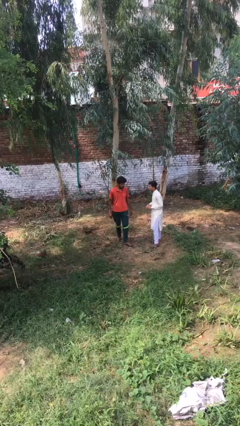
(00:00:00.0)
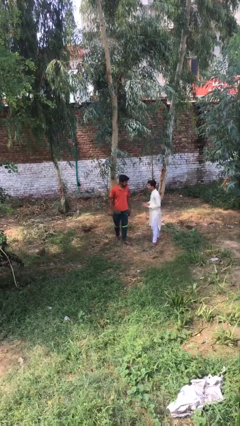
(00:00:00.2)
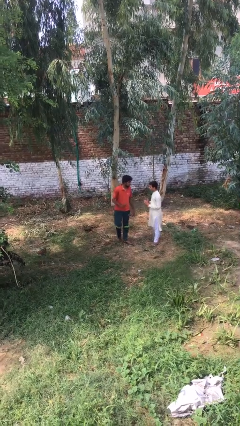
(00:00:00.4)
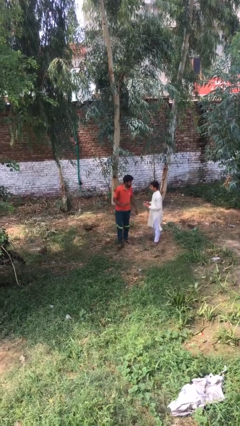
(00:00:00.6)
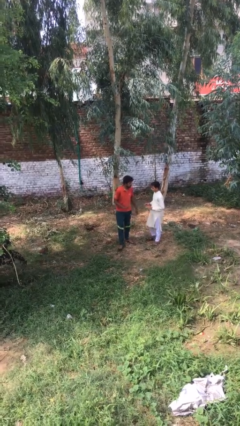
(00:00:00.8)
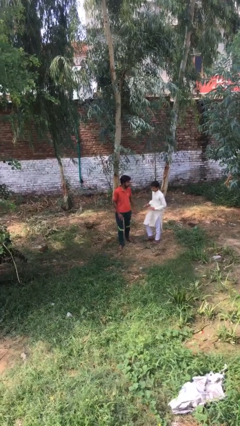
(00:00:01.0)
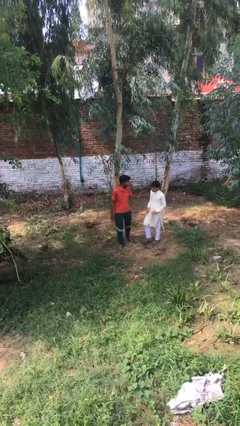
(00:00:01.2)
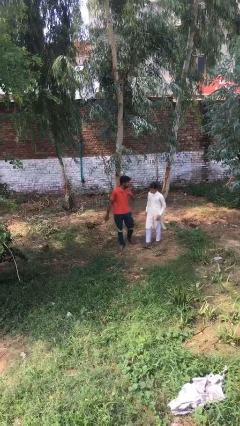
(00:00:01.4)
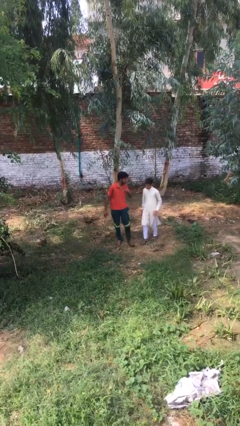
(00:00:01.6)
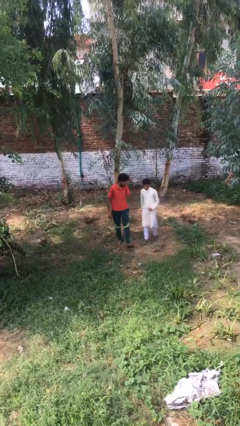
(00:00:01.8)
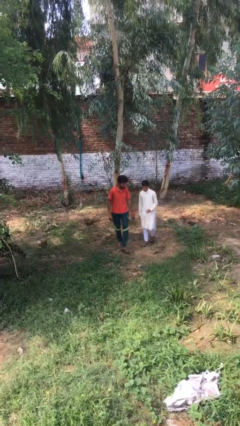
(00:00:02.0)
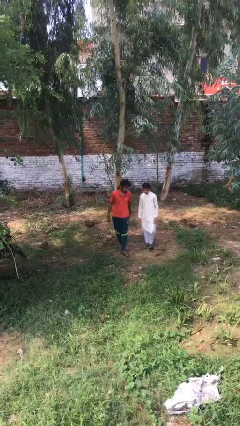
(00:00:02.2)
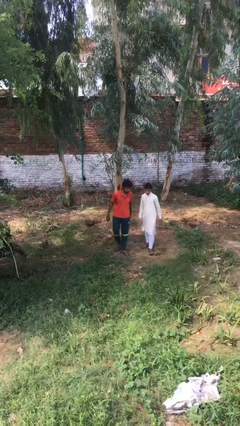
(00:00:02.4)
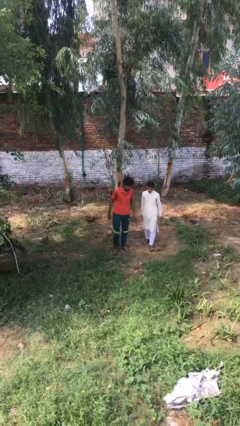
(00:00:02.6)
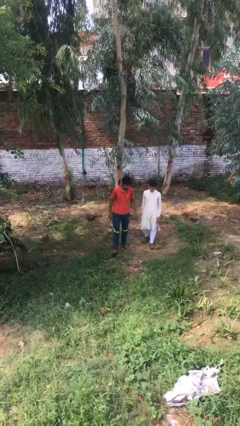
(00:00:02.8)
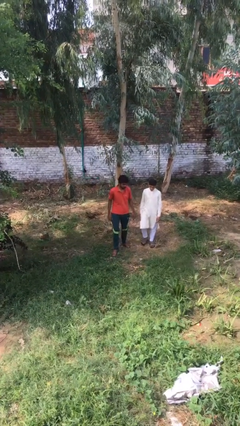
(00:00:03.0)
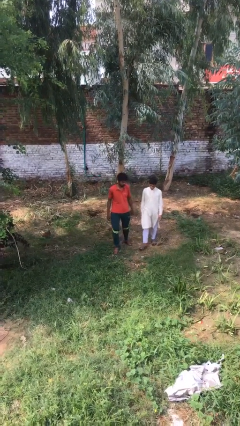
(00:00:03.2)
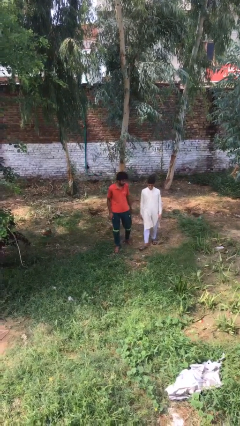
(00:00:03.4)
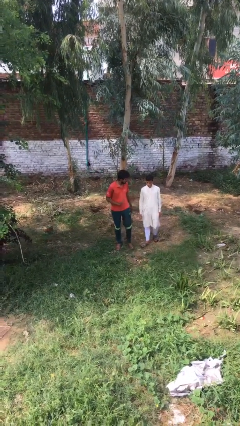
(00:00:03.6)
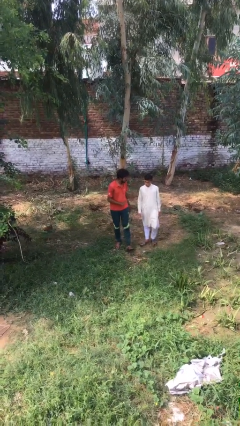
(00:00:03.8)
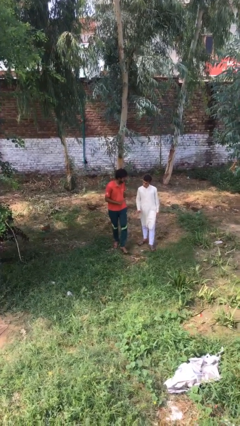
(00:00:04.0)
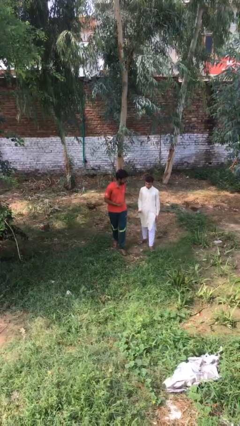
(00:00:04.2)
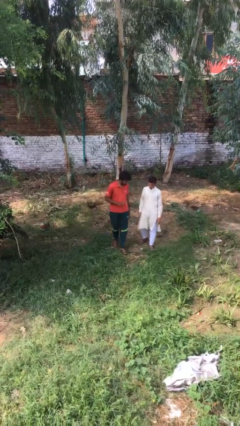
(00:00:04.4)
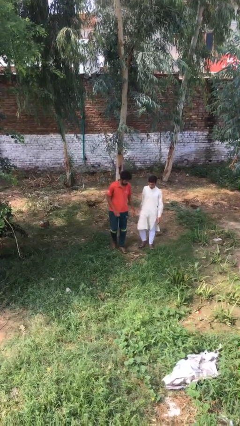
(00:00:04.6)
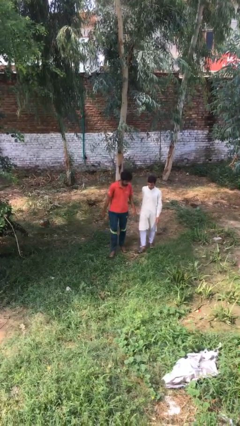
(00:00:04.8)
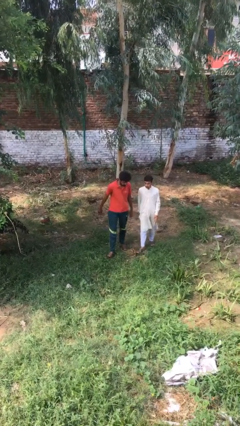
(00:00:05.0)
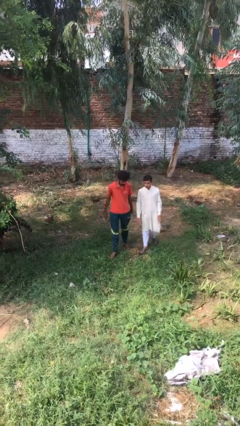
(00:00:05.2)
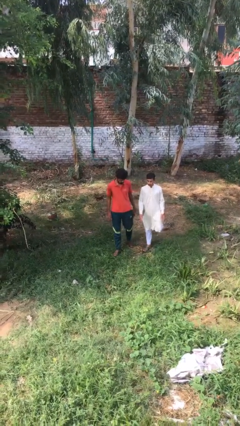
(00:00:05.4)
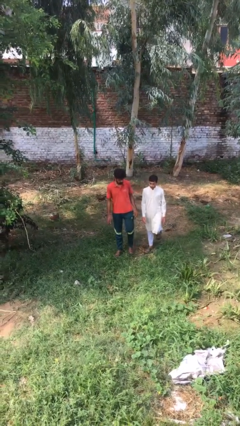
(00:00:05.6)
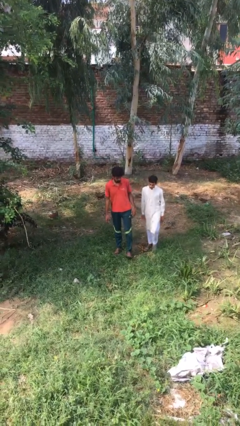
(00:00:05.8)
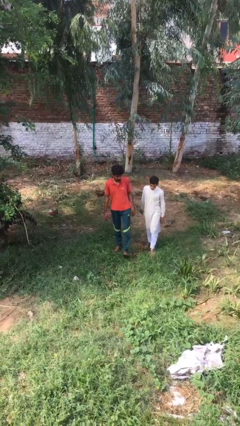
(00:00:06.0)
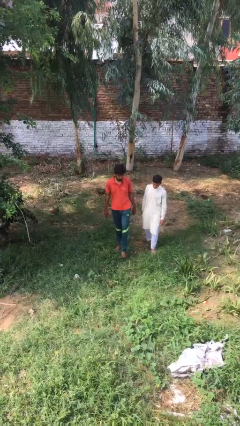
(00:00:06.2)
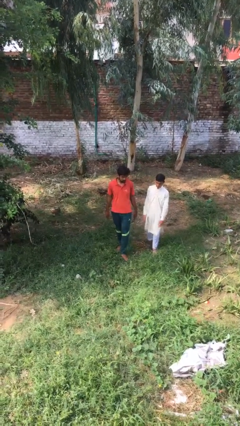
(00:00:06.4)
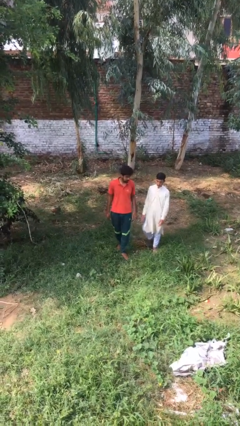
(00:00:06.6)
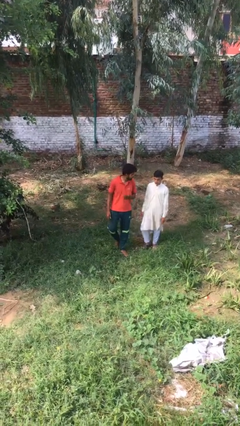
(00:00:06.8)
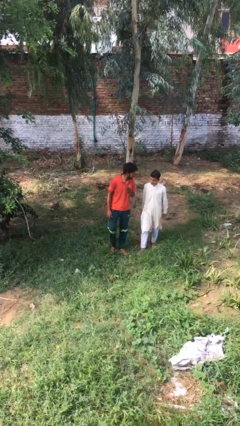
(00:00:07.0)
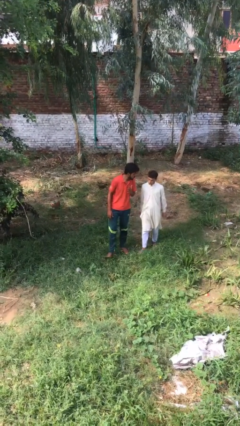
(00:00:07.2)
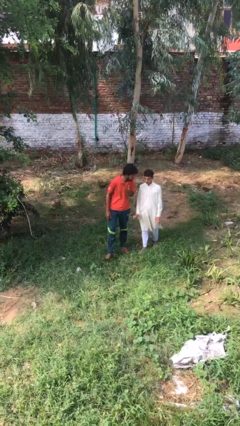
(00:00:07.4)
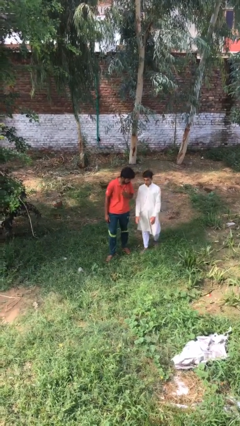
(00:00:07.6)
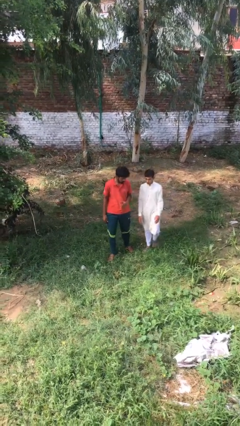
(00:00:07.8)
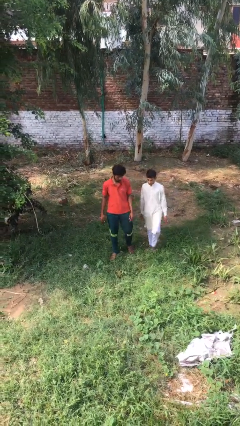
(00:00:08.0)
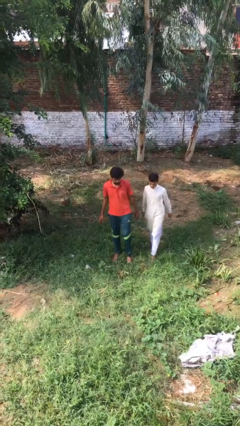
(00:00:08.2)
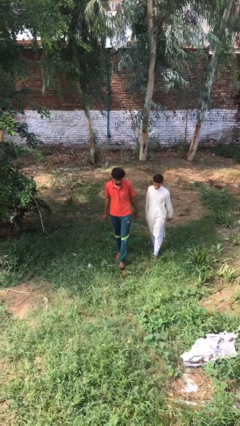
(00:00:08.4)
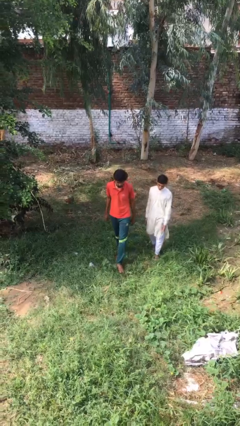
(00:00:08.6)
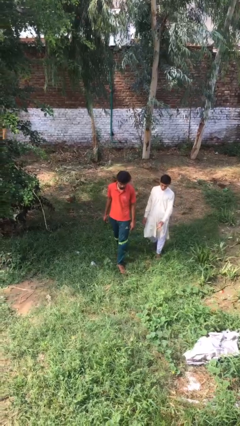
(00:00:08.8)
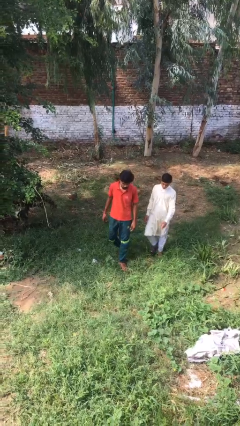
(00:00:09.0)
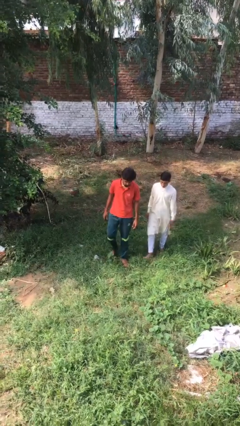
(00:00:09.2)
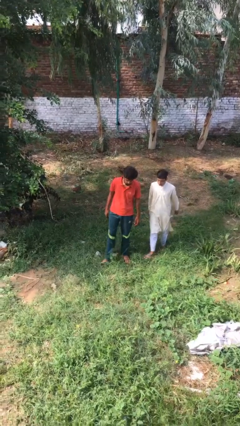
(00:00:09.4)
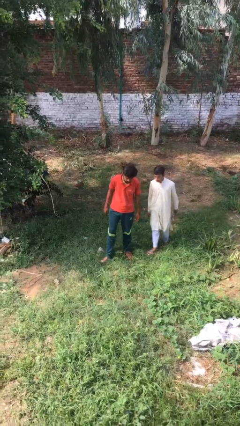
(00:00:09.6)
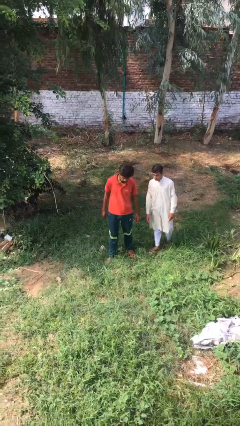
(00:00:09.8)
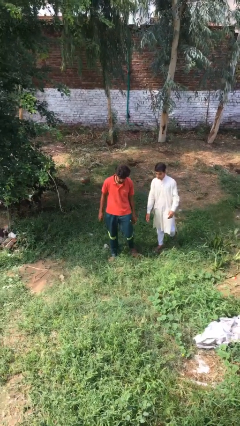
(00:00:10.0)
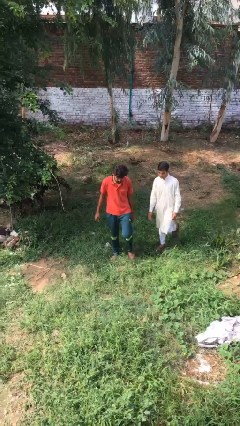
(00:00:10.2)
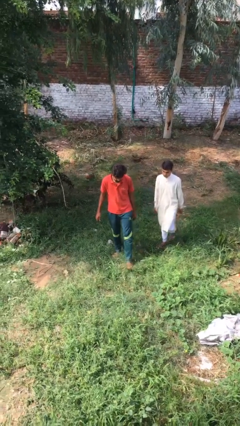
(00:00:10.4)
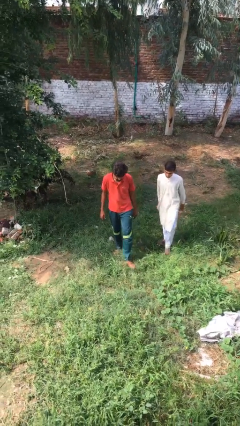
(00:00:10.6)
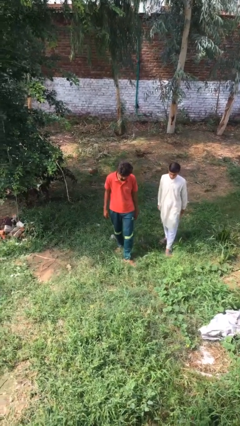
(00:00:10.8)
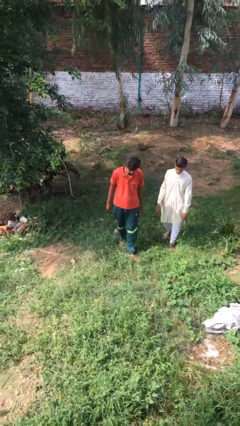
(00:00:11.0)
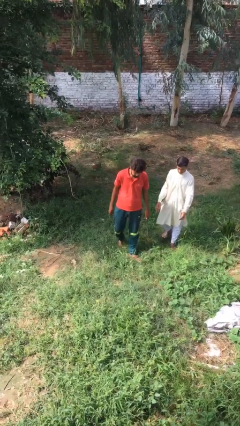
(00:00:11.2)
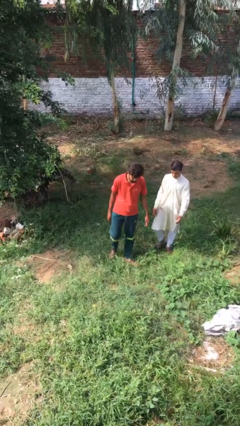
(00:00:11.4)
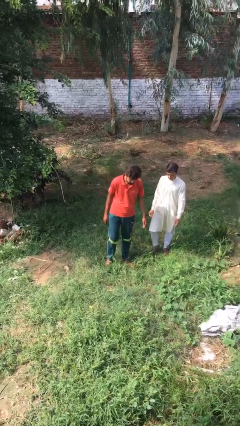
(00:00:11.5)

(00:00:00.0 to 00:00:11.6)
person talks to person

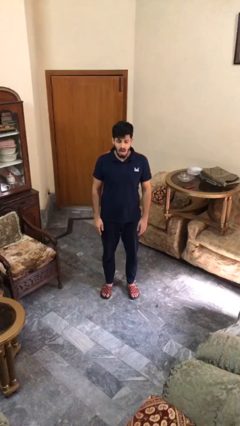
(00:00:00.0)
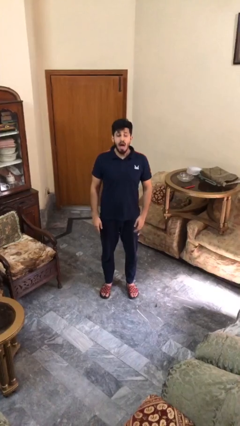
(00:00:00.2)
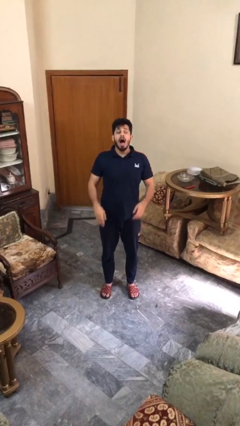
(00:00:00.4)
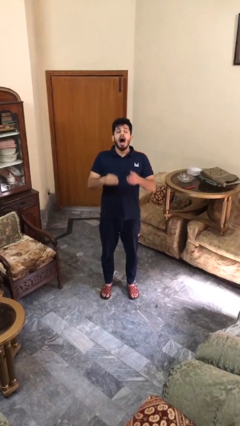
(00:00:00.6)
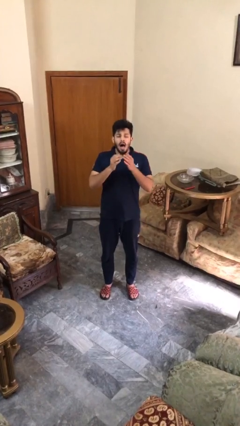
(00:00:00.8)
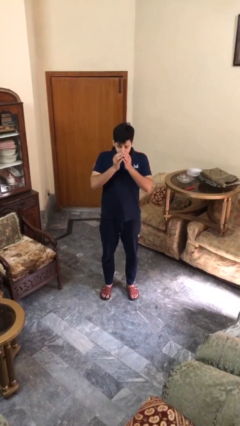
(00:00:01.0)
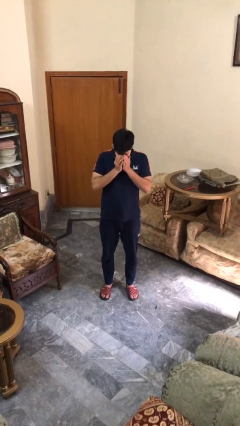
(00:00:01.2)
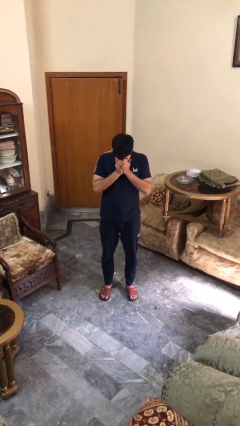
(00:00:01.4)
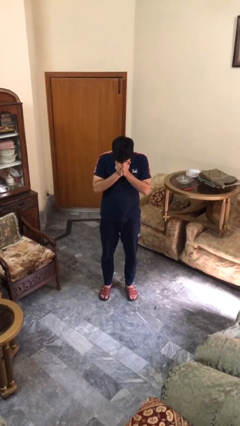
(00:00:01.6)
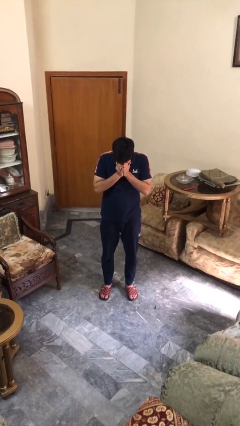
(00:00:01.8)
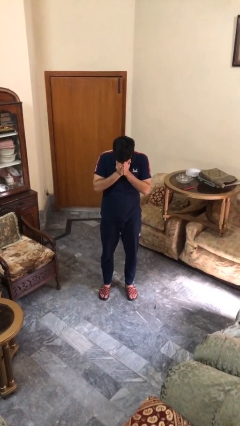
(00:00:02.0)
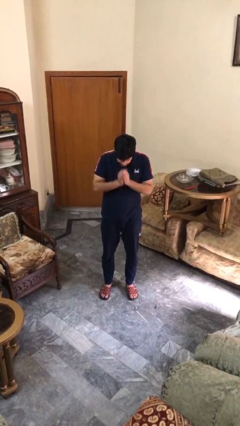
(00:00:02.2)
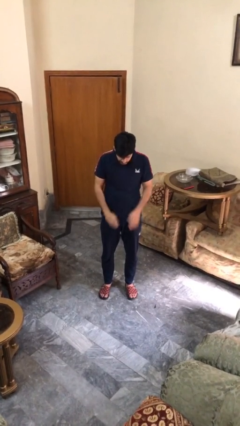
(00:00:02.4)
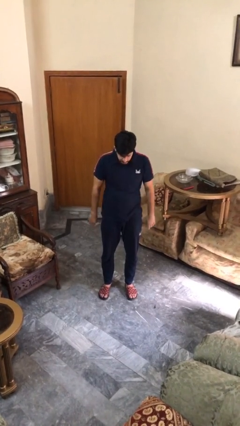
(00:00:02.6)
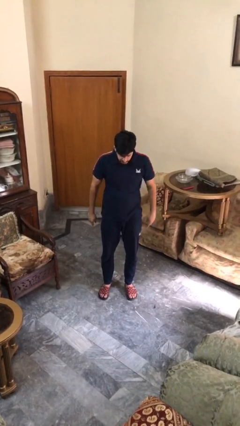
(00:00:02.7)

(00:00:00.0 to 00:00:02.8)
person sneezes into hand

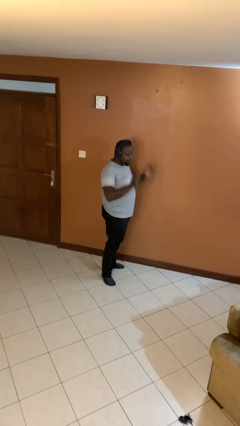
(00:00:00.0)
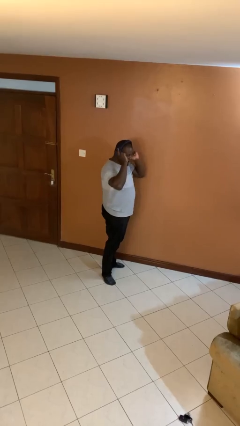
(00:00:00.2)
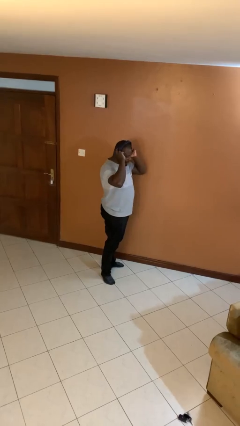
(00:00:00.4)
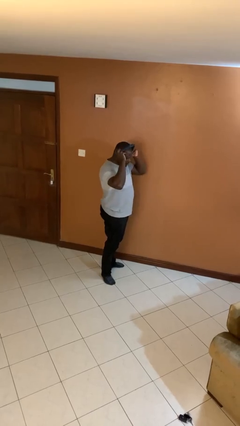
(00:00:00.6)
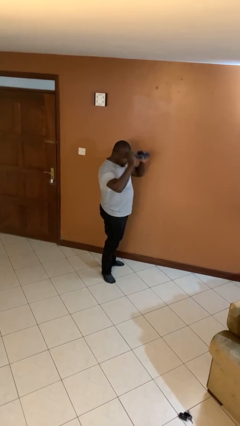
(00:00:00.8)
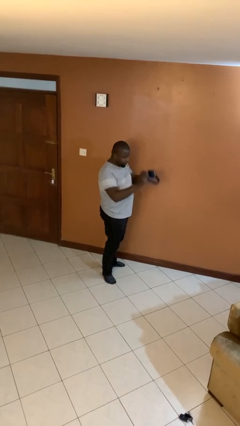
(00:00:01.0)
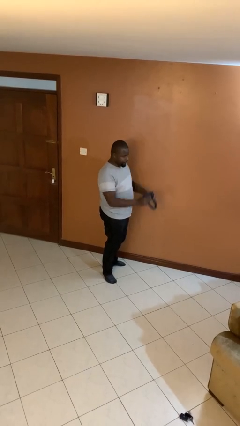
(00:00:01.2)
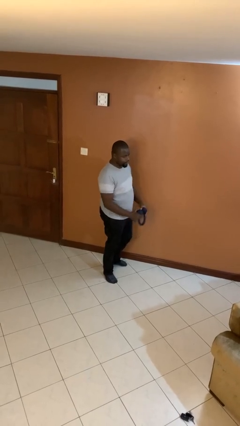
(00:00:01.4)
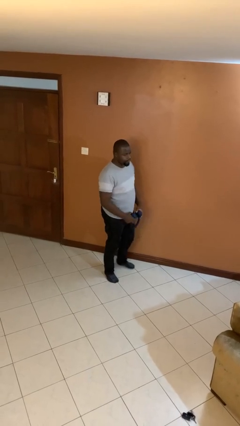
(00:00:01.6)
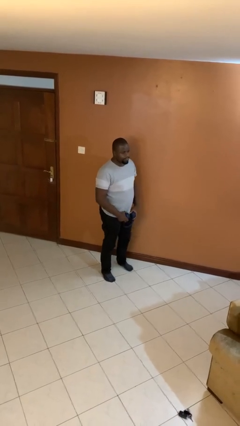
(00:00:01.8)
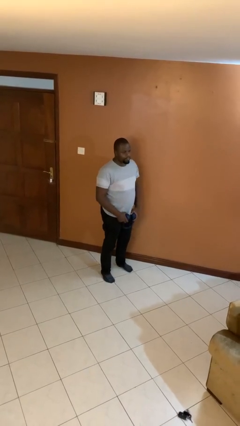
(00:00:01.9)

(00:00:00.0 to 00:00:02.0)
person takes off headphones

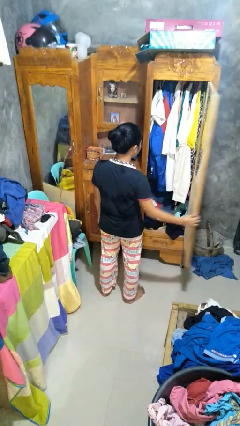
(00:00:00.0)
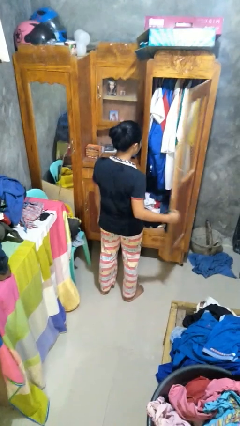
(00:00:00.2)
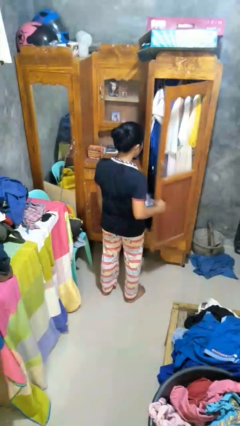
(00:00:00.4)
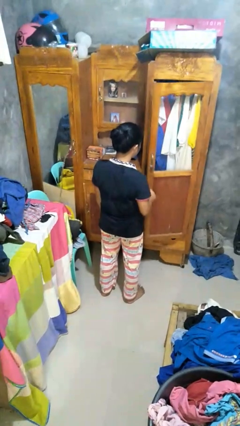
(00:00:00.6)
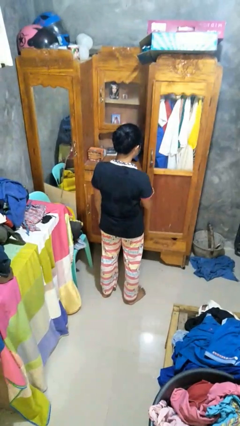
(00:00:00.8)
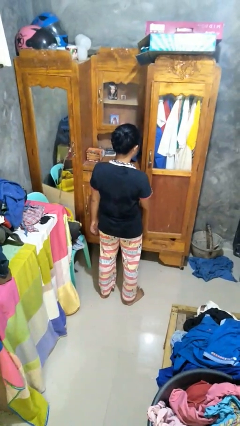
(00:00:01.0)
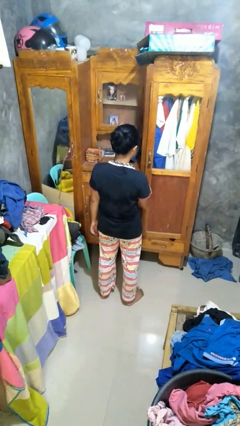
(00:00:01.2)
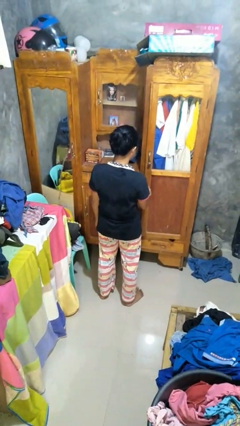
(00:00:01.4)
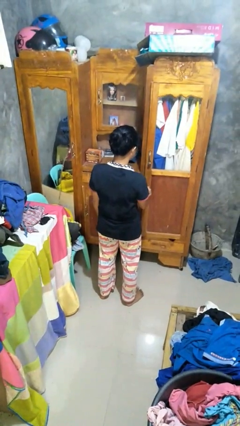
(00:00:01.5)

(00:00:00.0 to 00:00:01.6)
person closes closet door
